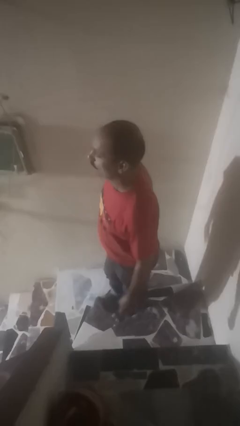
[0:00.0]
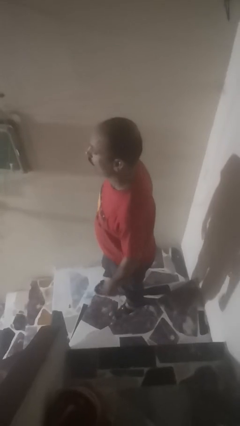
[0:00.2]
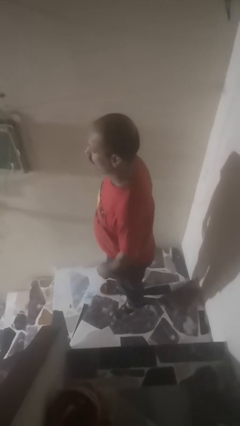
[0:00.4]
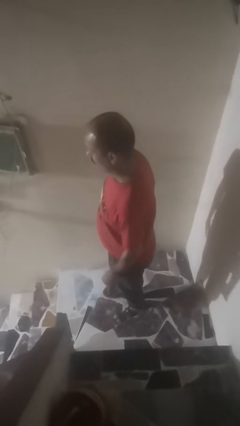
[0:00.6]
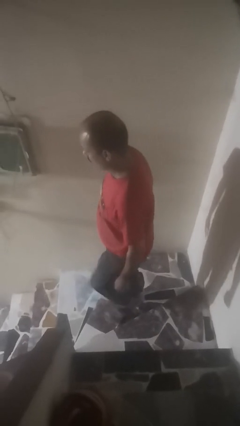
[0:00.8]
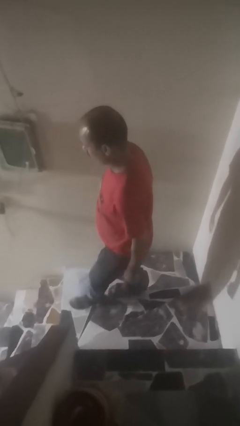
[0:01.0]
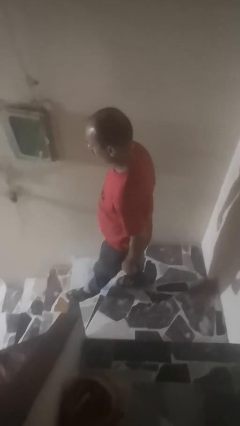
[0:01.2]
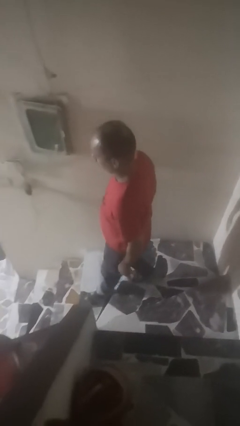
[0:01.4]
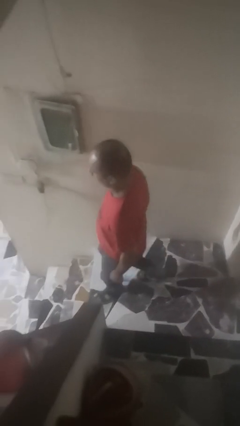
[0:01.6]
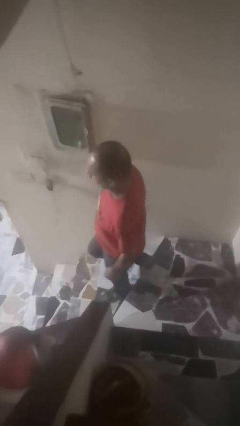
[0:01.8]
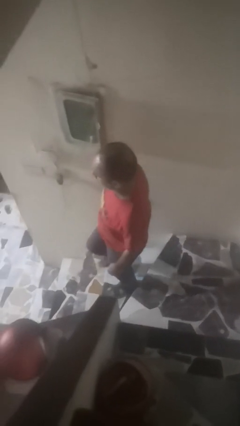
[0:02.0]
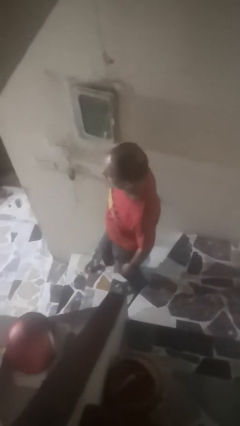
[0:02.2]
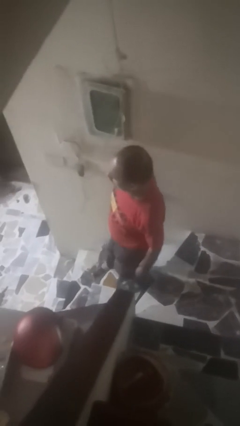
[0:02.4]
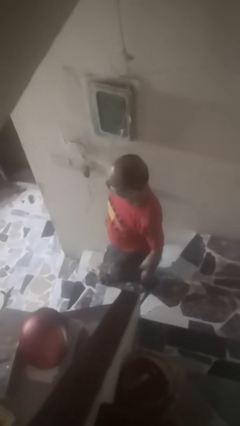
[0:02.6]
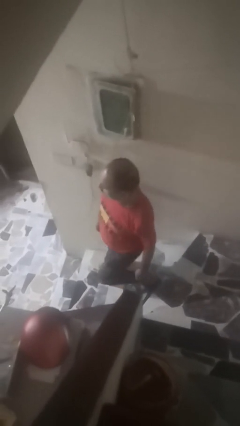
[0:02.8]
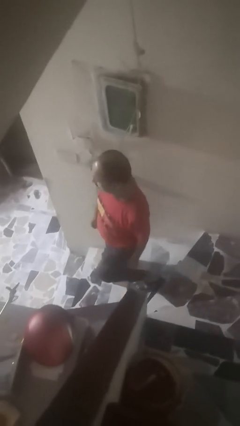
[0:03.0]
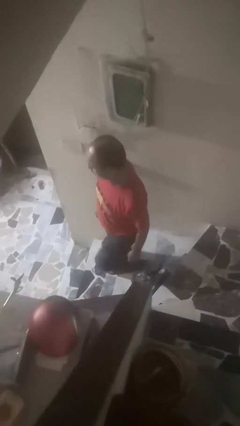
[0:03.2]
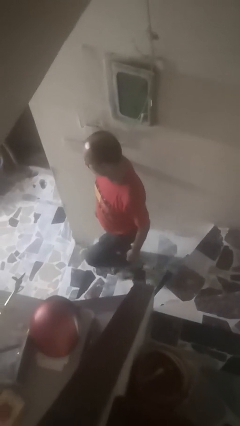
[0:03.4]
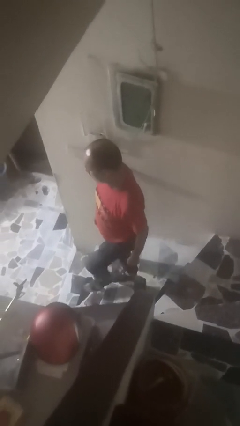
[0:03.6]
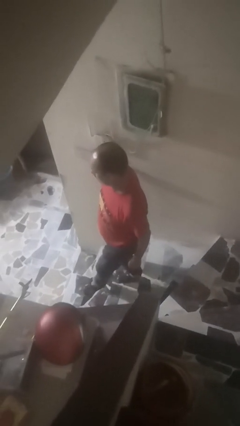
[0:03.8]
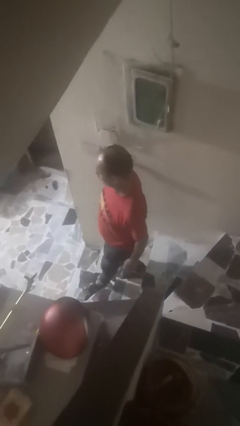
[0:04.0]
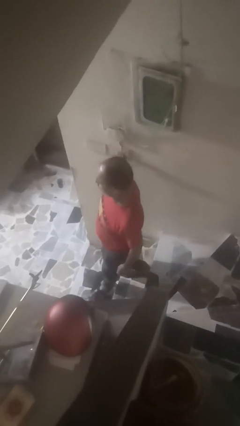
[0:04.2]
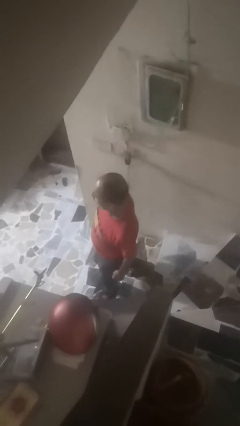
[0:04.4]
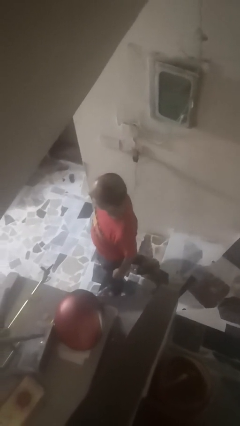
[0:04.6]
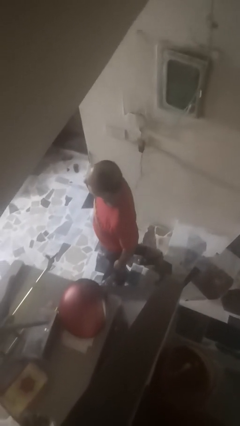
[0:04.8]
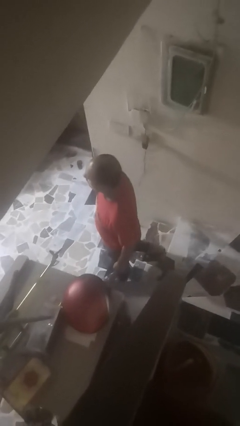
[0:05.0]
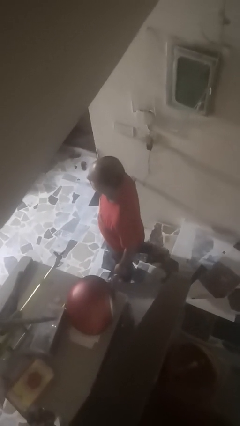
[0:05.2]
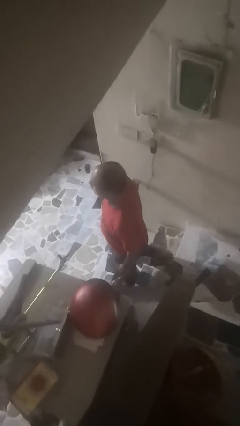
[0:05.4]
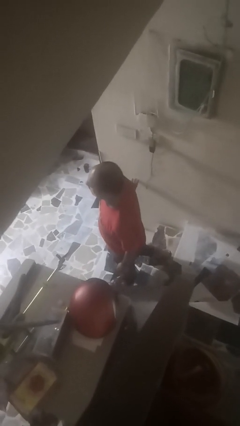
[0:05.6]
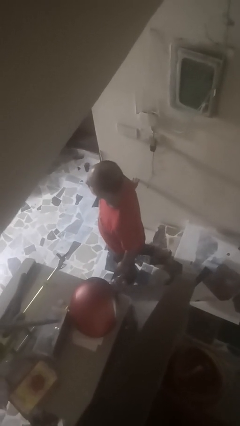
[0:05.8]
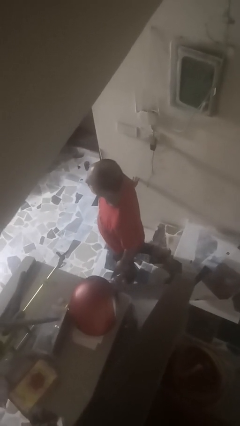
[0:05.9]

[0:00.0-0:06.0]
person climbs down stairs

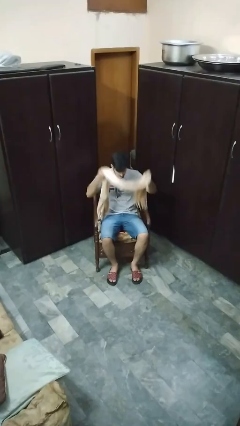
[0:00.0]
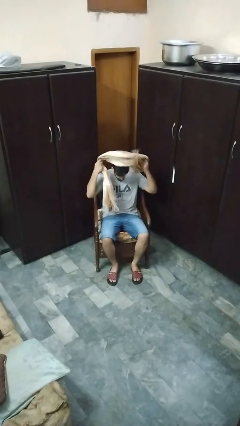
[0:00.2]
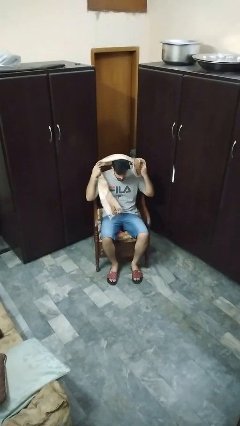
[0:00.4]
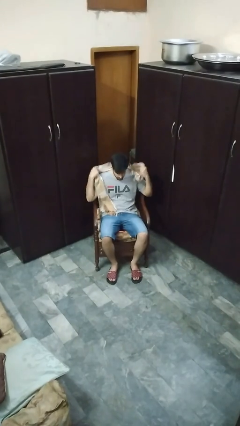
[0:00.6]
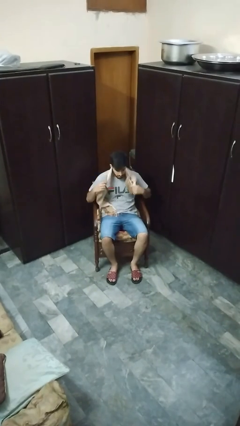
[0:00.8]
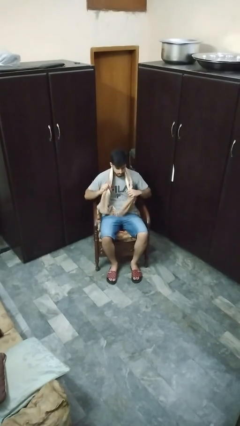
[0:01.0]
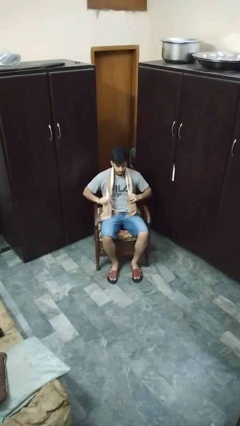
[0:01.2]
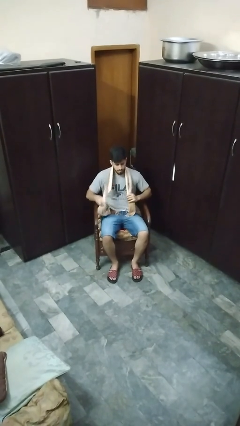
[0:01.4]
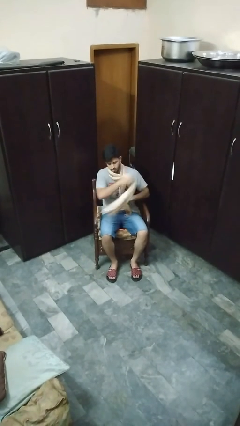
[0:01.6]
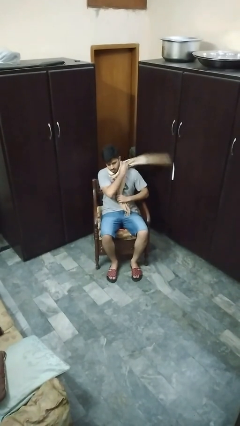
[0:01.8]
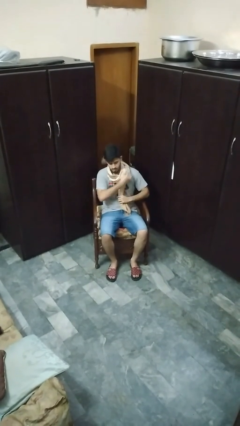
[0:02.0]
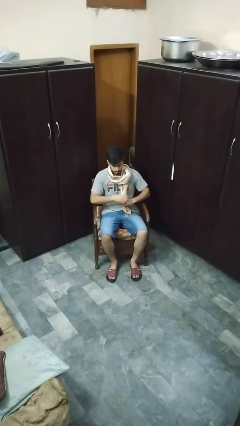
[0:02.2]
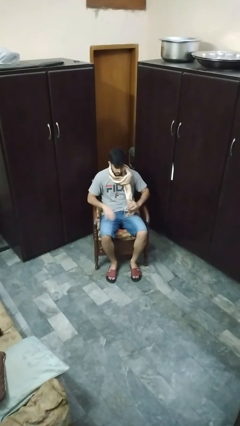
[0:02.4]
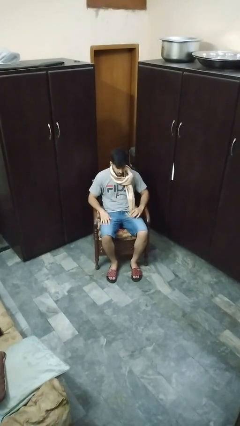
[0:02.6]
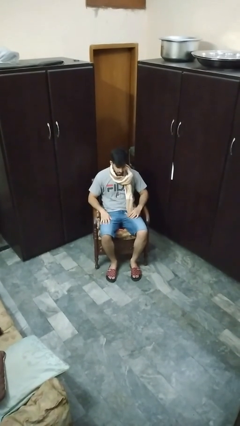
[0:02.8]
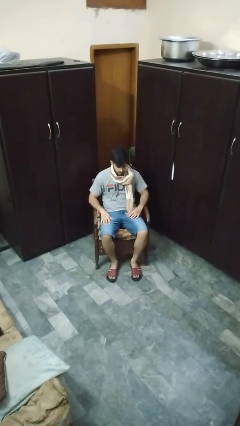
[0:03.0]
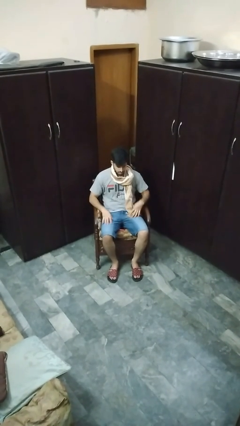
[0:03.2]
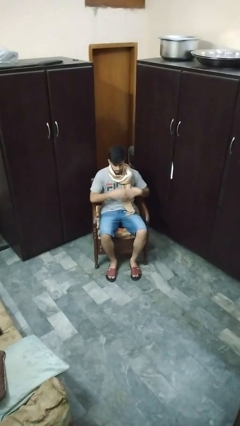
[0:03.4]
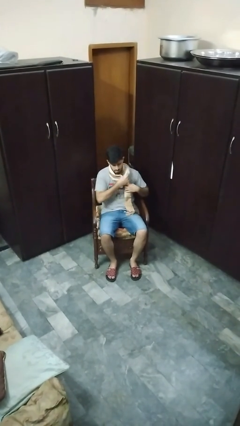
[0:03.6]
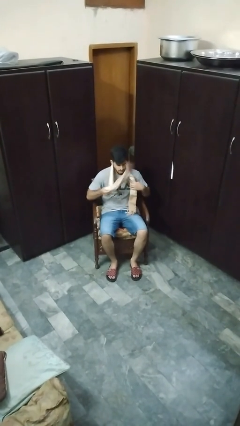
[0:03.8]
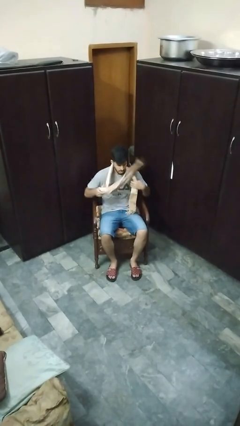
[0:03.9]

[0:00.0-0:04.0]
person puts on scarf

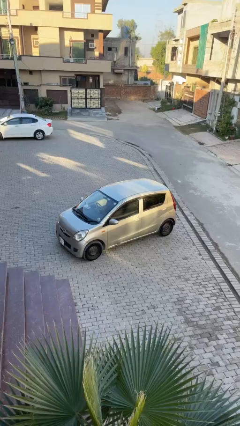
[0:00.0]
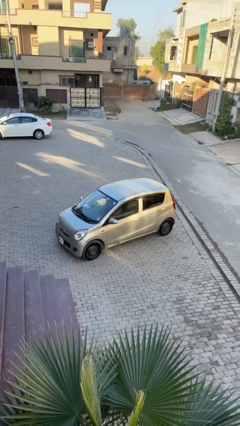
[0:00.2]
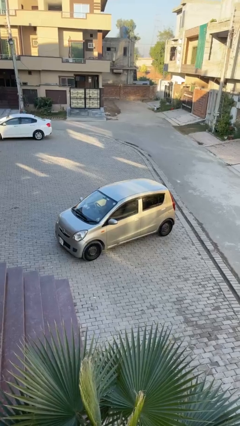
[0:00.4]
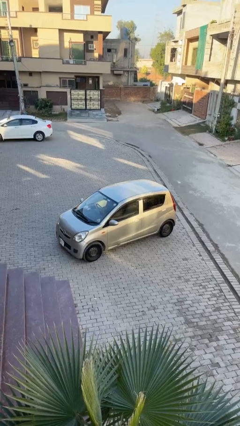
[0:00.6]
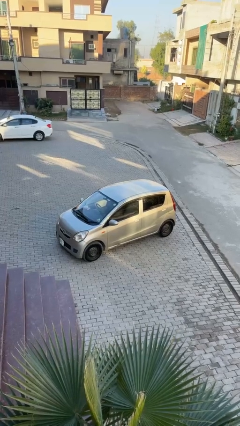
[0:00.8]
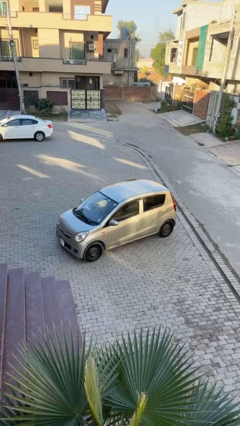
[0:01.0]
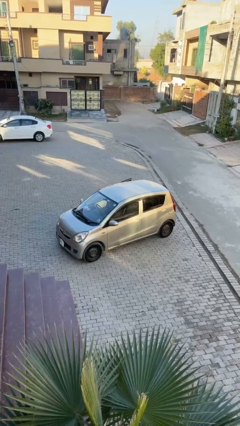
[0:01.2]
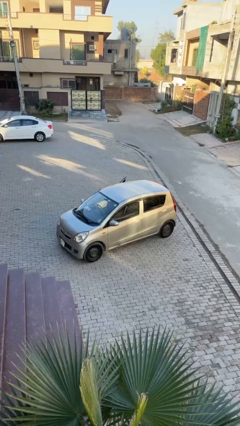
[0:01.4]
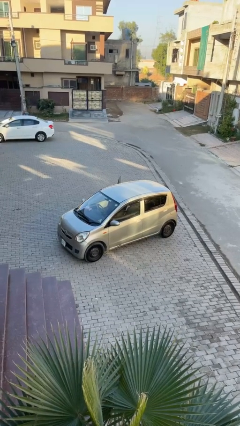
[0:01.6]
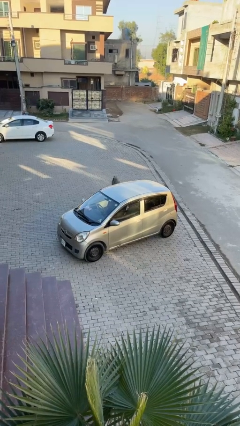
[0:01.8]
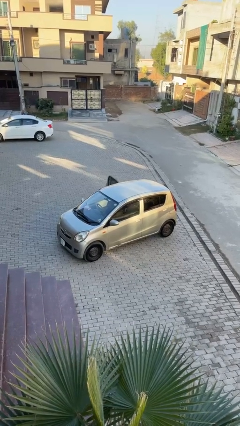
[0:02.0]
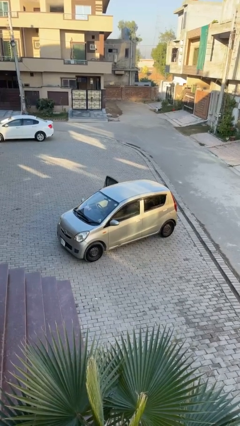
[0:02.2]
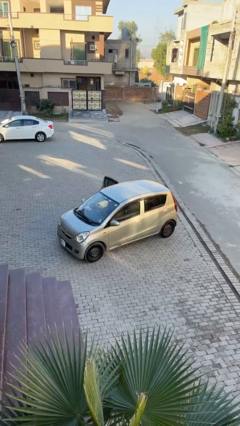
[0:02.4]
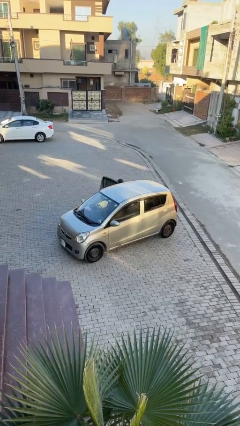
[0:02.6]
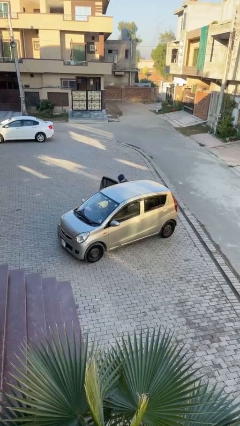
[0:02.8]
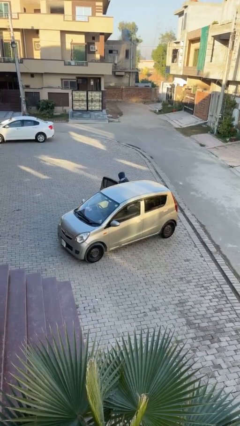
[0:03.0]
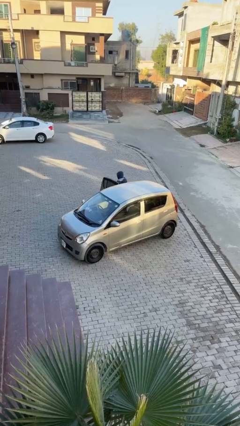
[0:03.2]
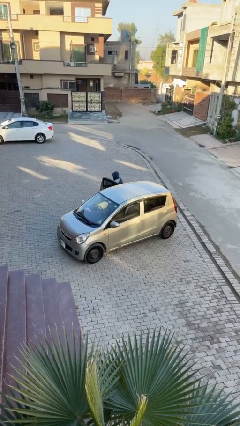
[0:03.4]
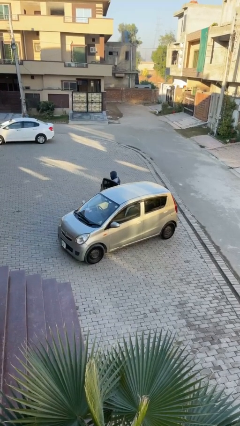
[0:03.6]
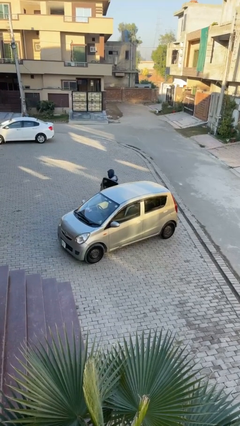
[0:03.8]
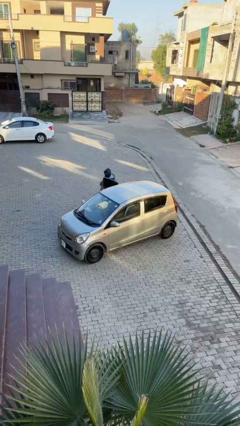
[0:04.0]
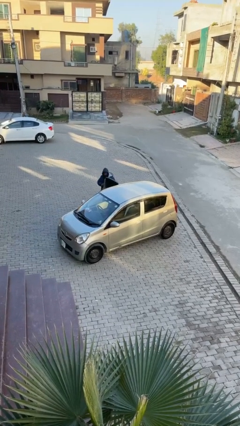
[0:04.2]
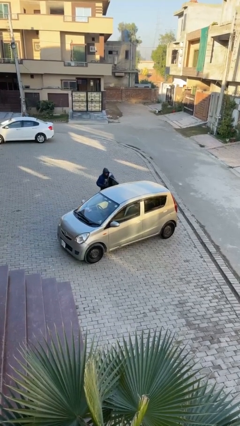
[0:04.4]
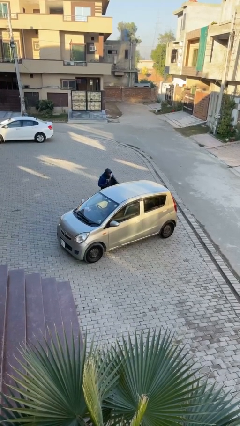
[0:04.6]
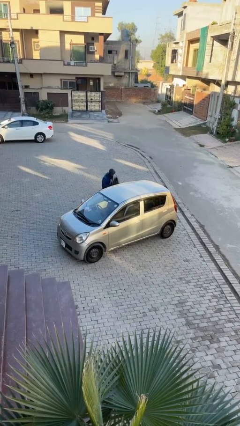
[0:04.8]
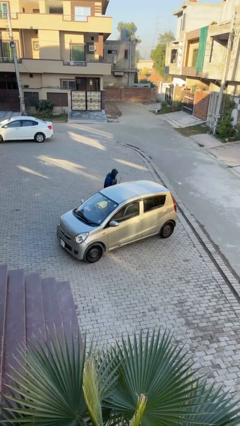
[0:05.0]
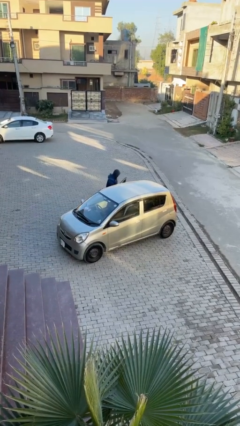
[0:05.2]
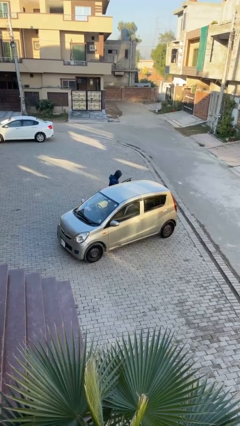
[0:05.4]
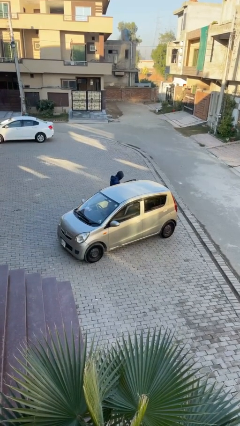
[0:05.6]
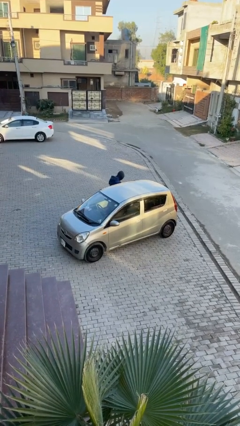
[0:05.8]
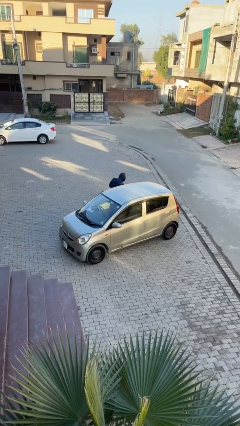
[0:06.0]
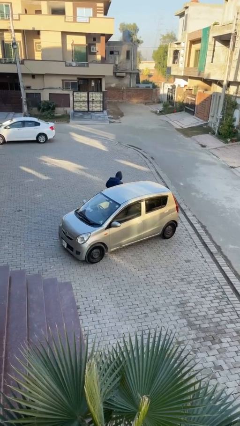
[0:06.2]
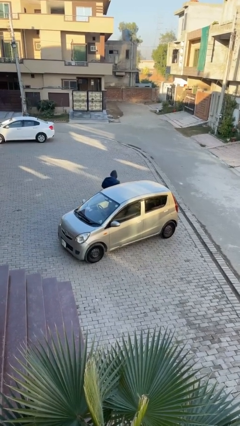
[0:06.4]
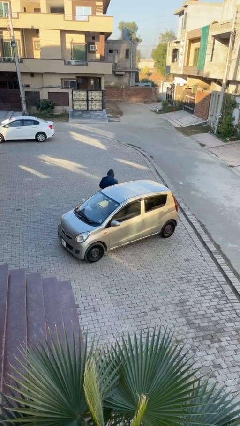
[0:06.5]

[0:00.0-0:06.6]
car drops off person

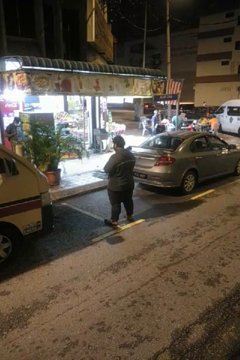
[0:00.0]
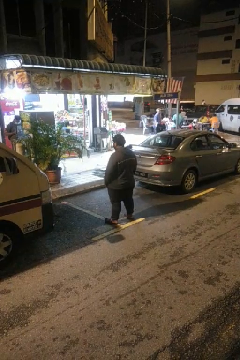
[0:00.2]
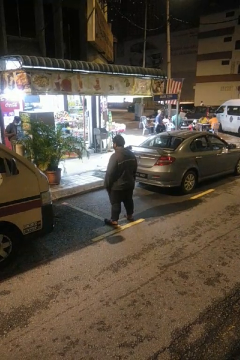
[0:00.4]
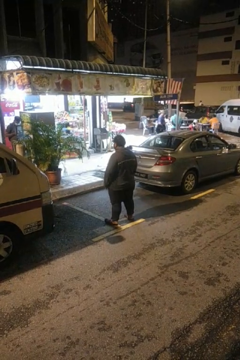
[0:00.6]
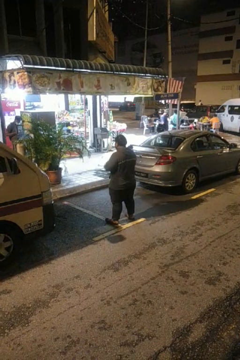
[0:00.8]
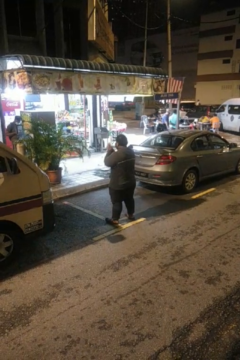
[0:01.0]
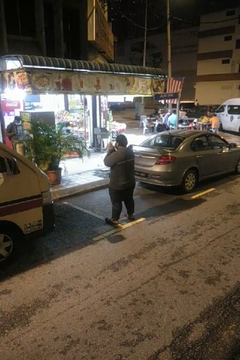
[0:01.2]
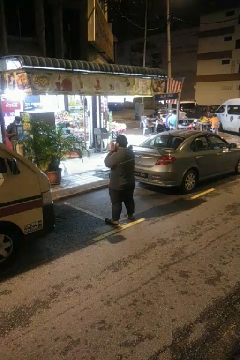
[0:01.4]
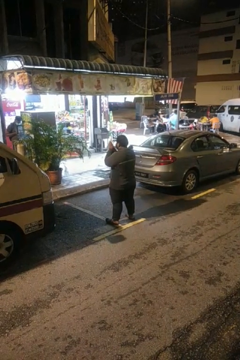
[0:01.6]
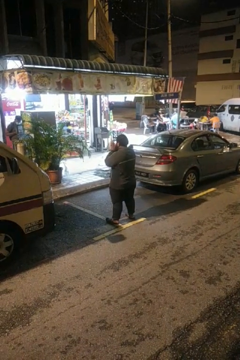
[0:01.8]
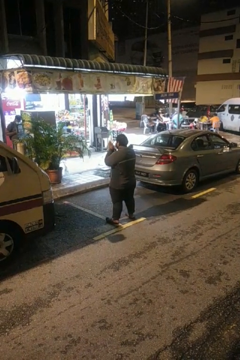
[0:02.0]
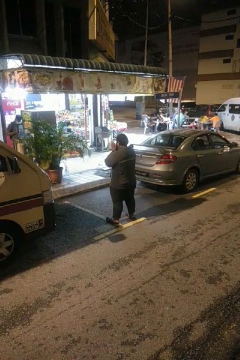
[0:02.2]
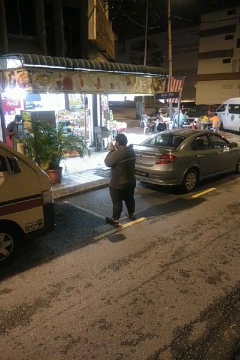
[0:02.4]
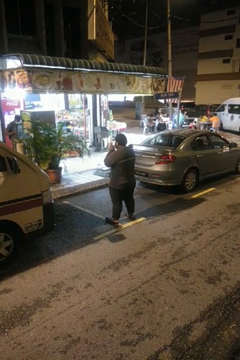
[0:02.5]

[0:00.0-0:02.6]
person blows into hands
